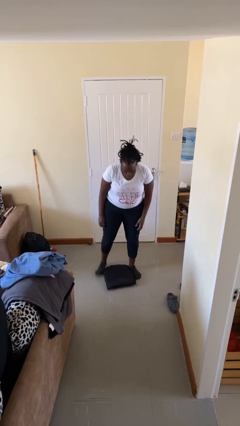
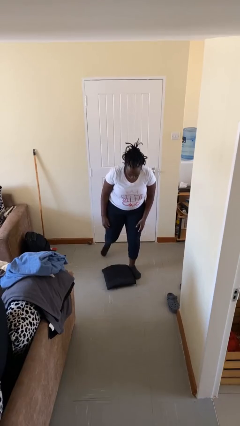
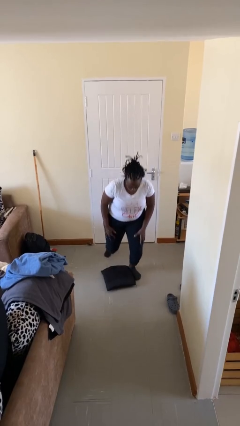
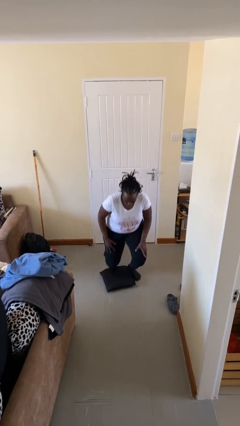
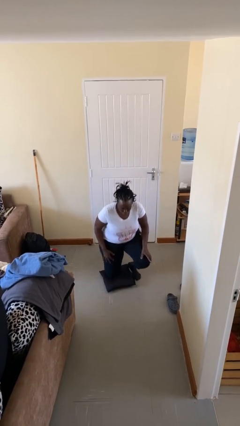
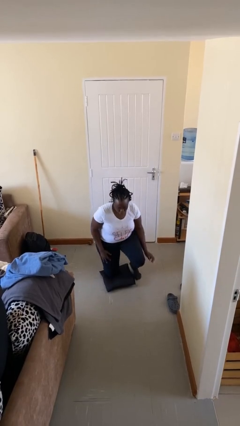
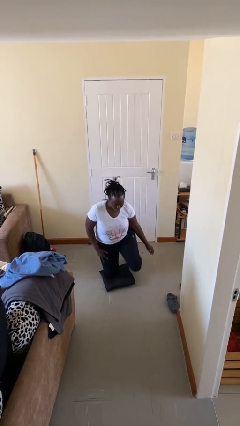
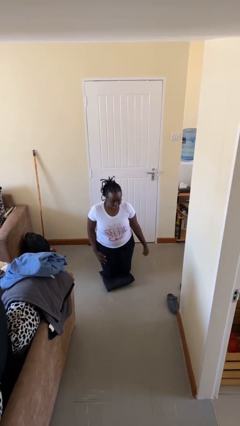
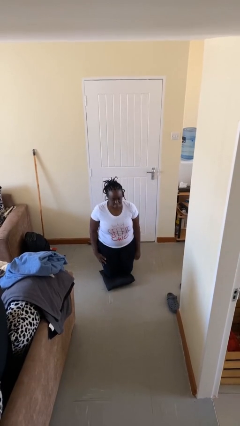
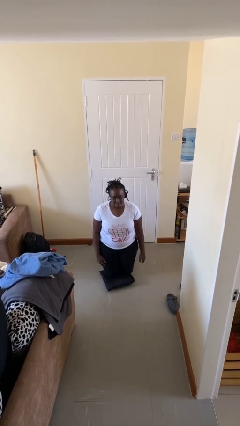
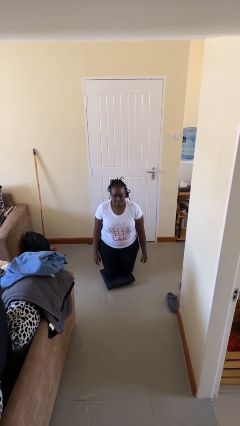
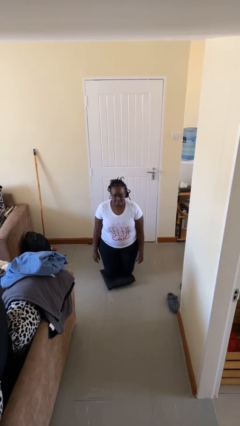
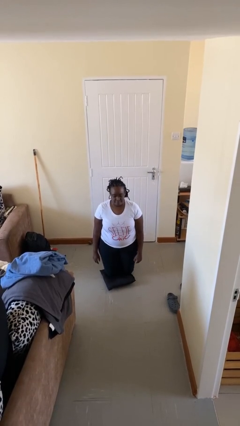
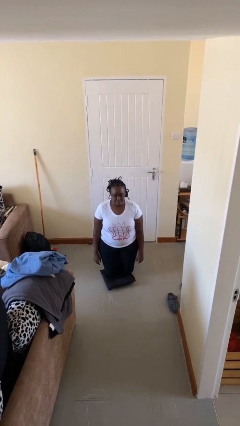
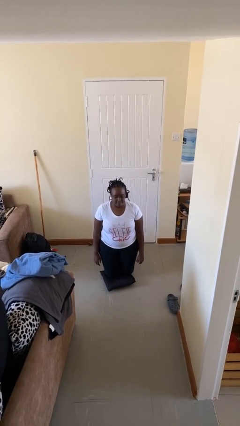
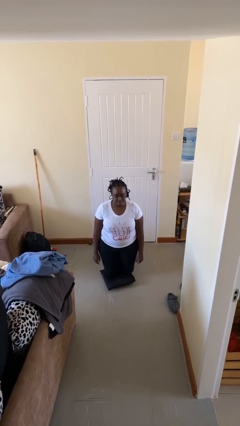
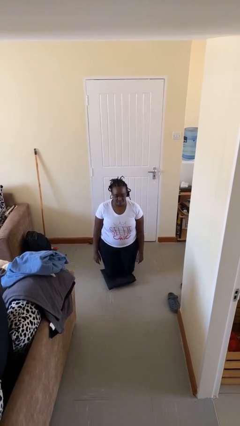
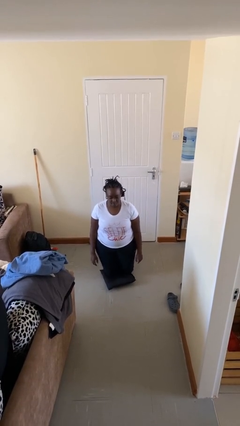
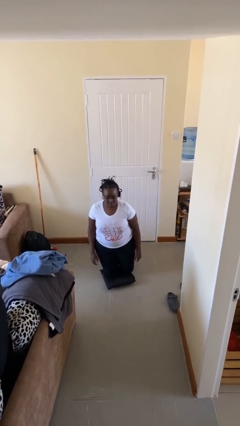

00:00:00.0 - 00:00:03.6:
person kneels

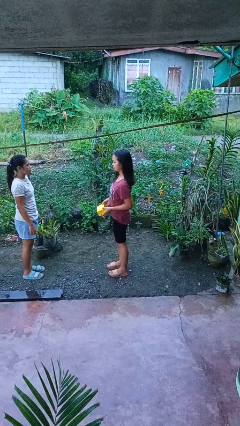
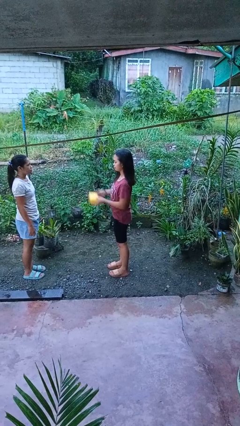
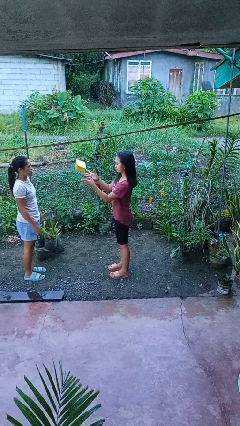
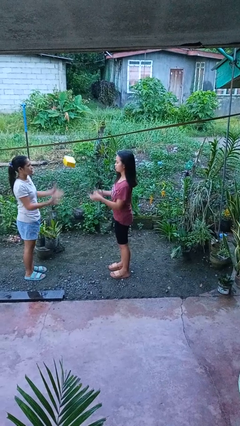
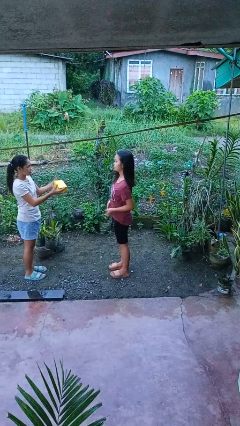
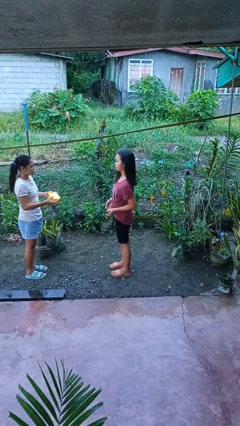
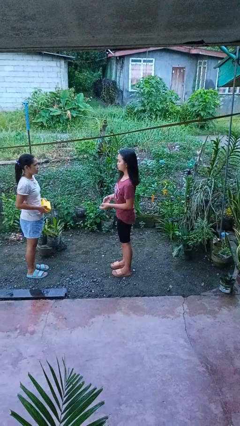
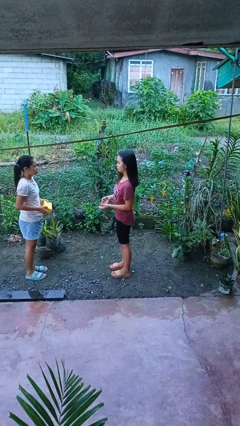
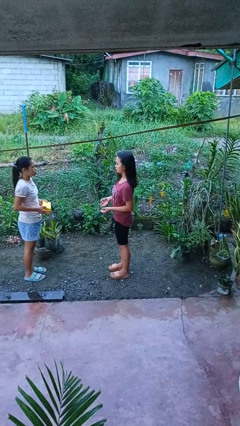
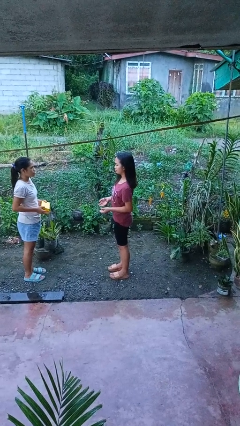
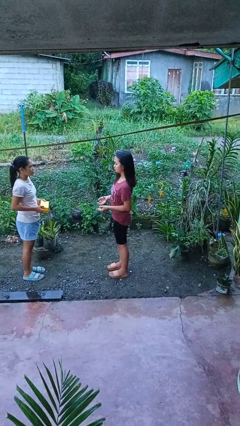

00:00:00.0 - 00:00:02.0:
person throws object to person

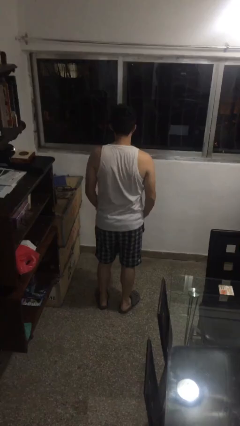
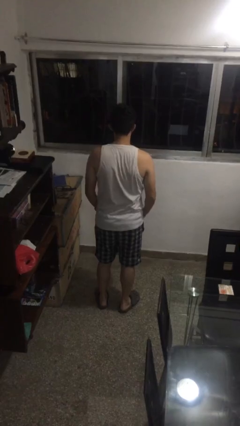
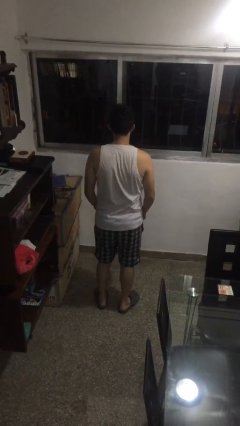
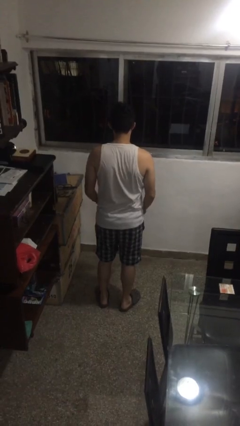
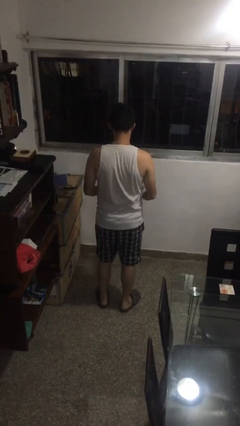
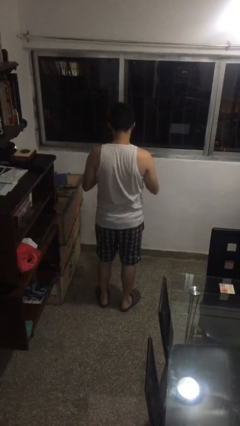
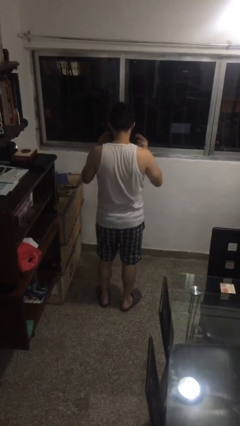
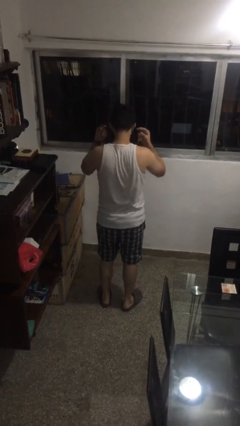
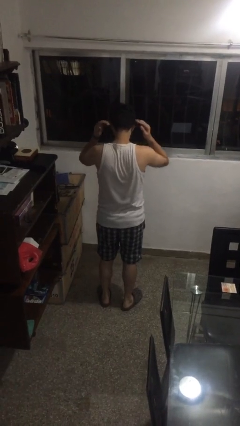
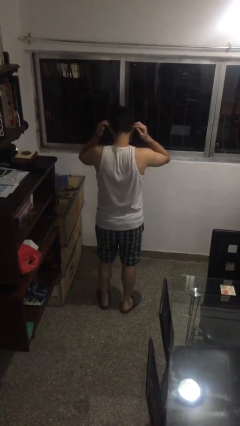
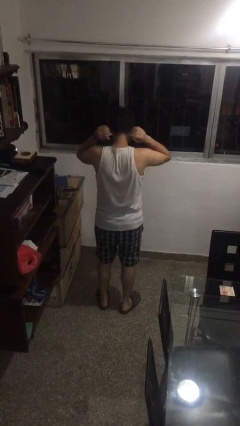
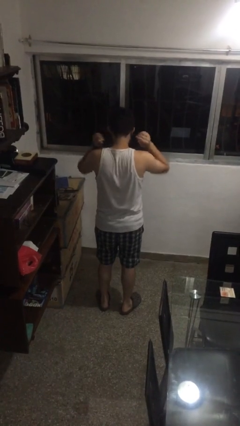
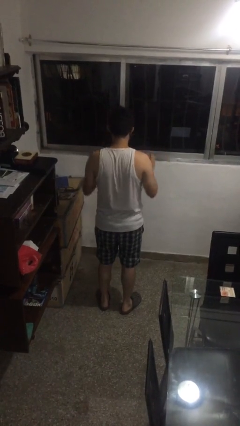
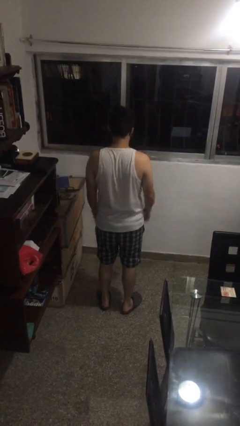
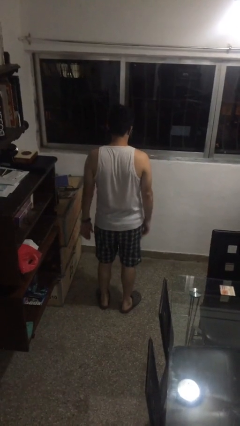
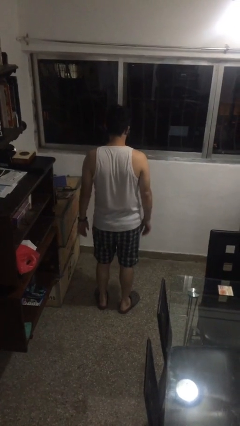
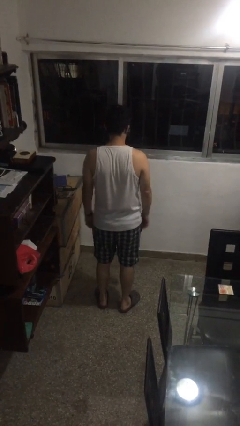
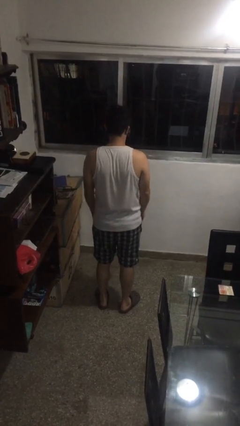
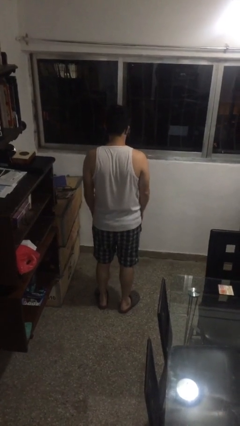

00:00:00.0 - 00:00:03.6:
person puts on facemask

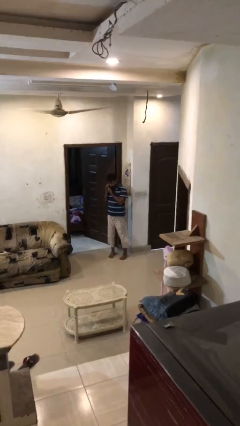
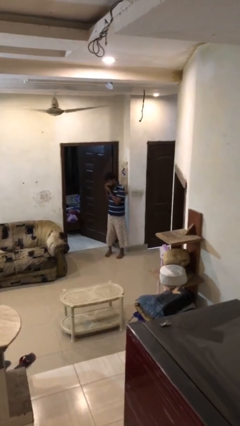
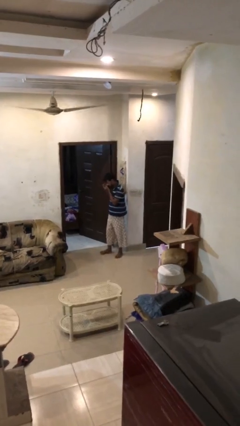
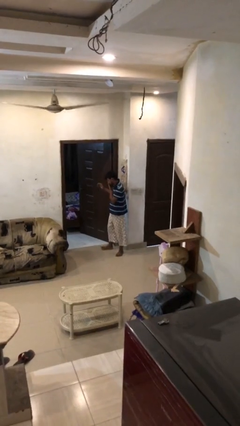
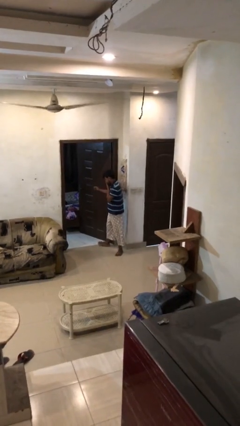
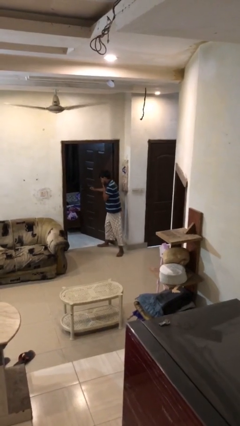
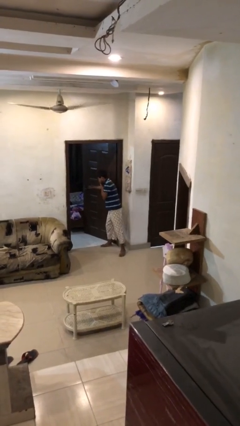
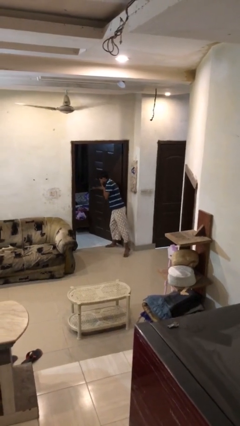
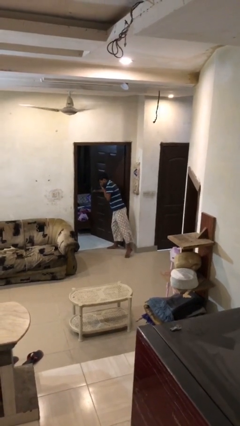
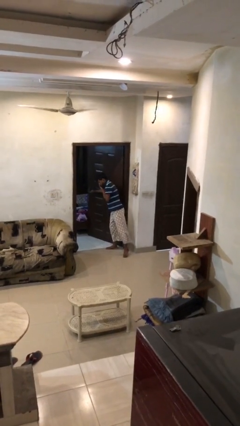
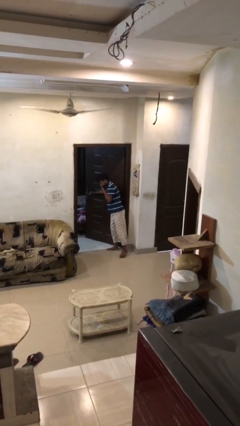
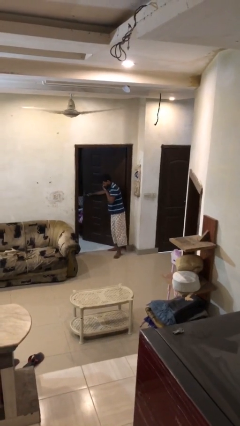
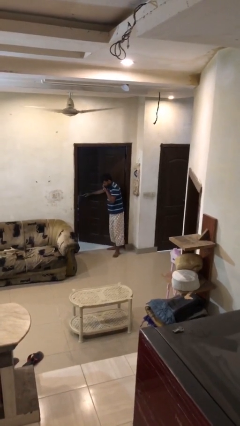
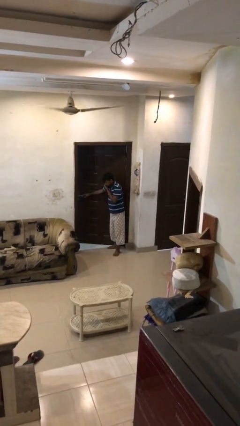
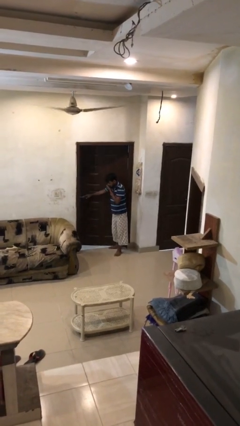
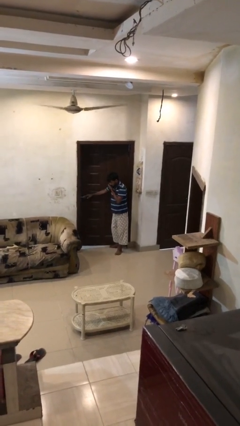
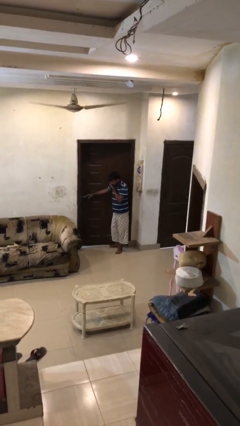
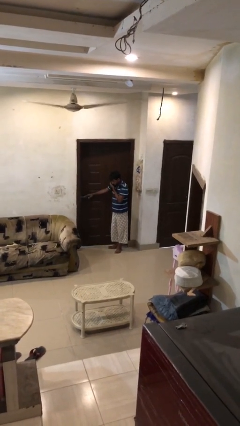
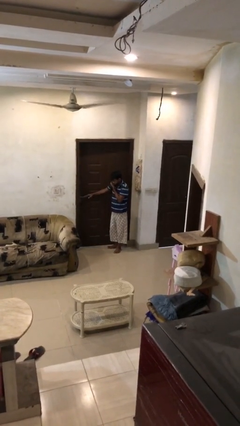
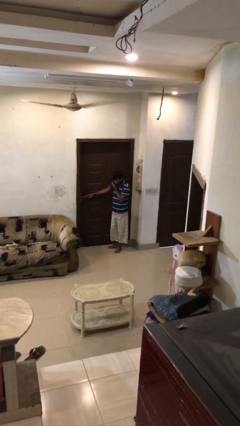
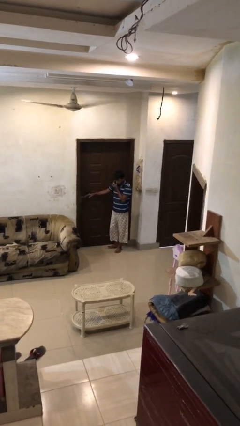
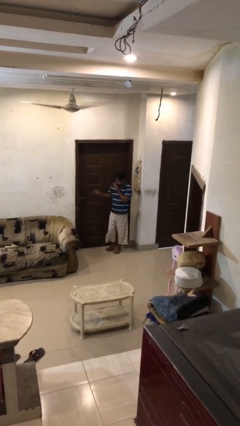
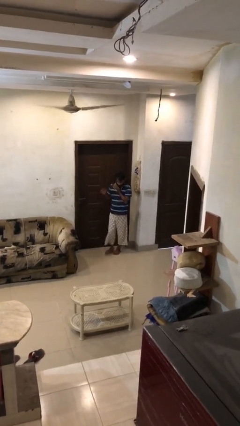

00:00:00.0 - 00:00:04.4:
person closes facility door

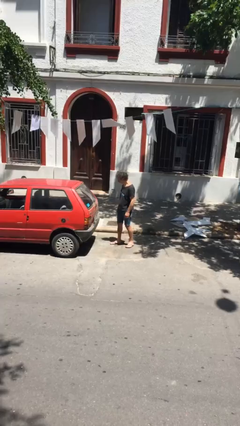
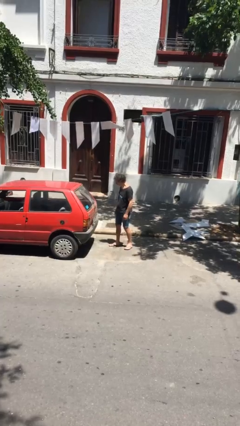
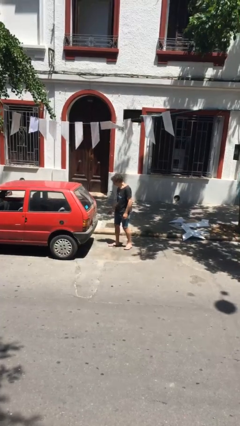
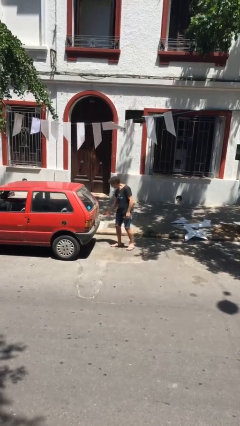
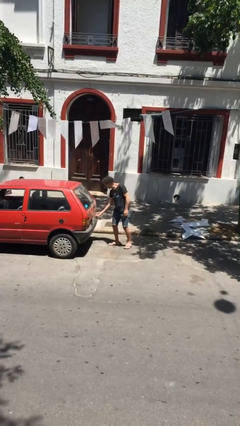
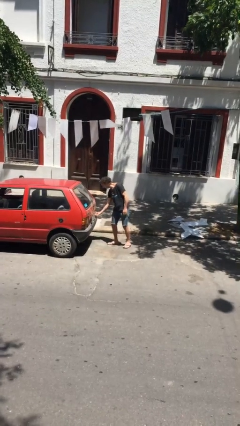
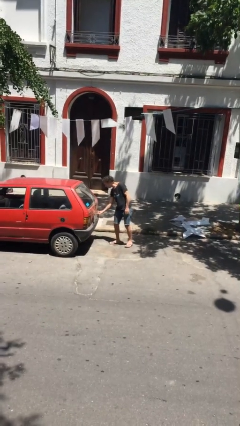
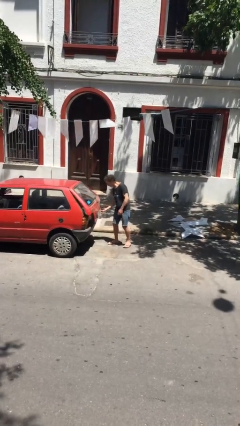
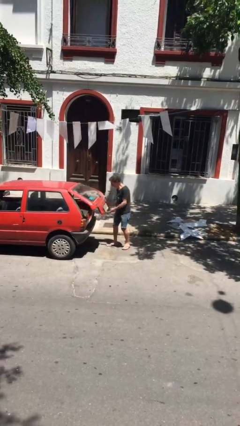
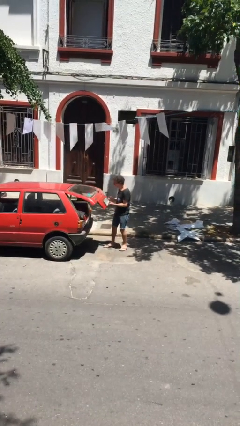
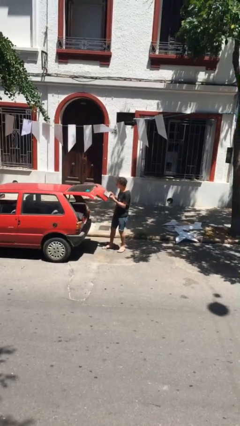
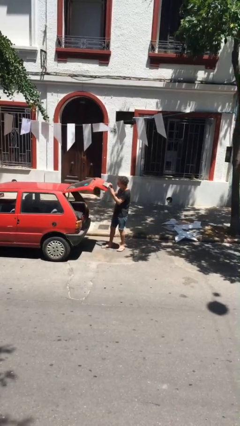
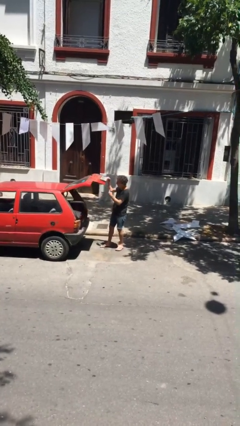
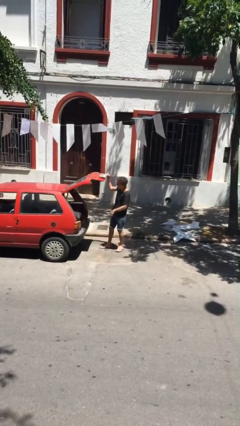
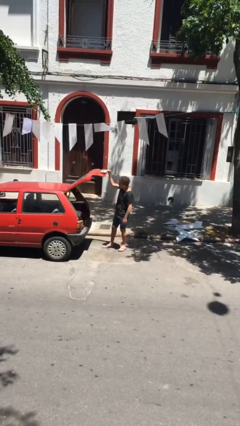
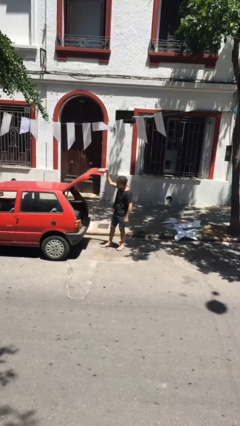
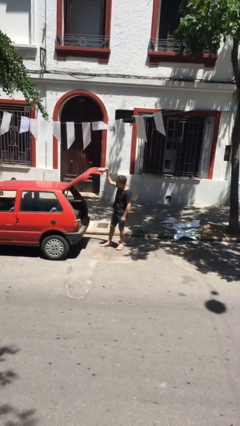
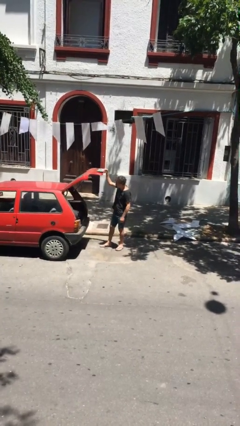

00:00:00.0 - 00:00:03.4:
person opens car trunk
